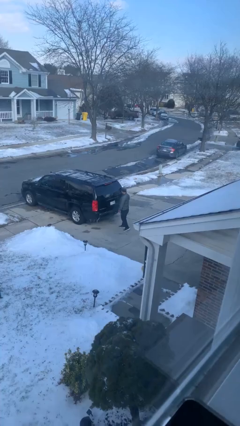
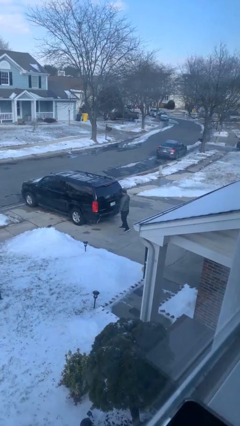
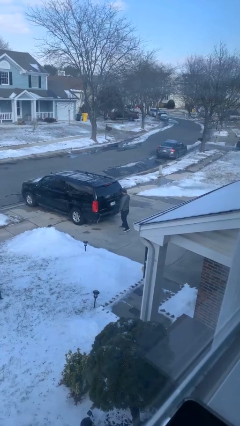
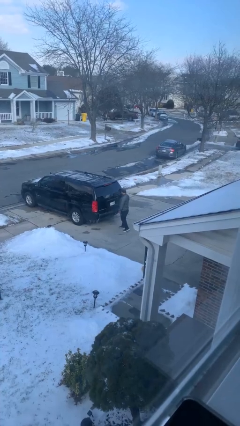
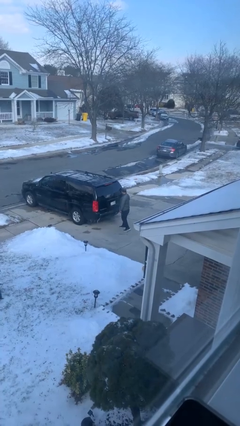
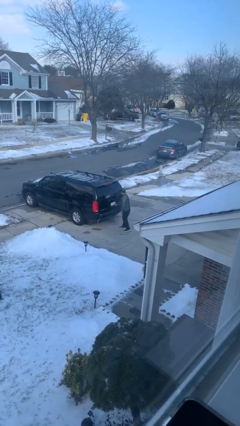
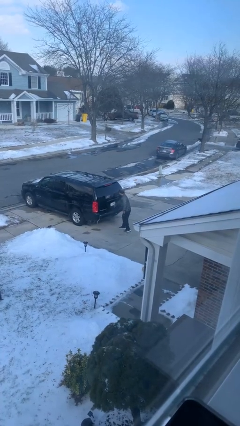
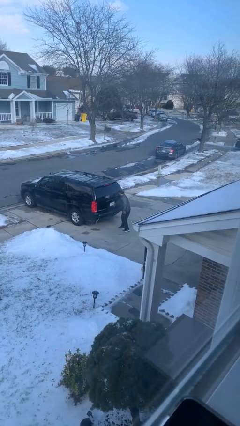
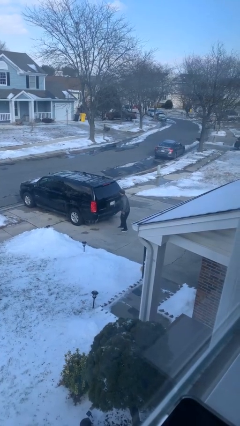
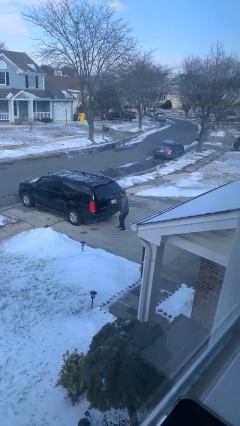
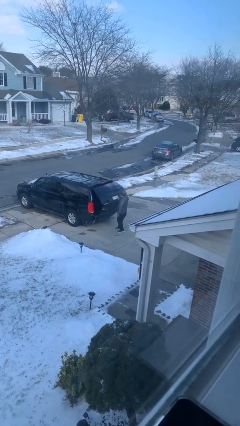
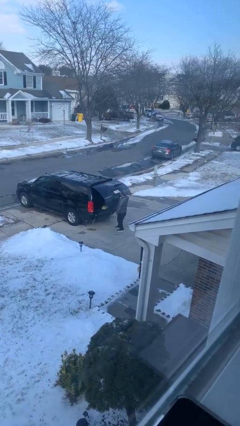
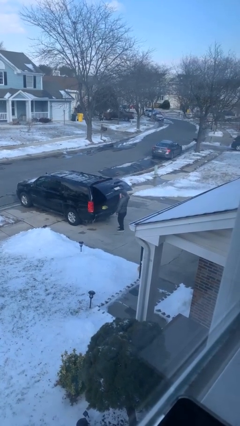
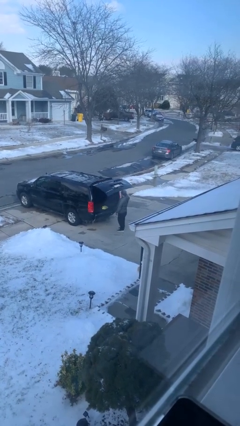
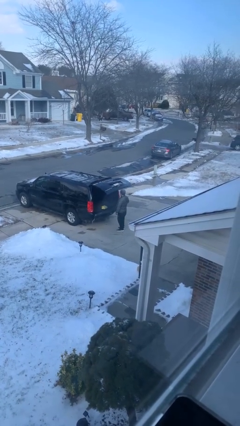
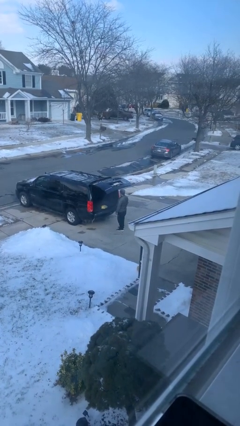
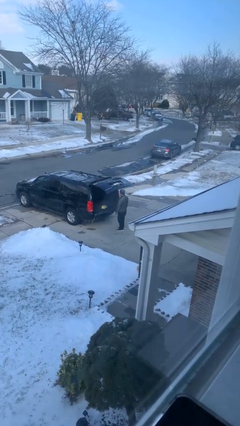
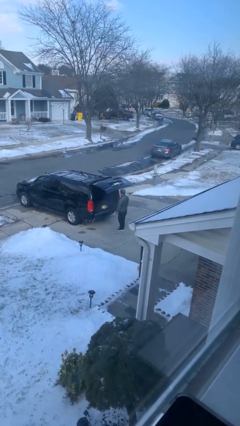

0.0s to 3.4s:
person opens car trunk

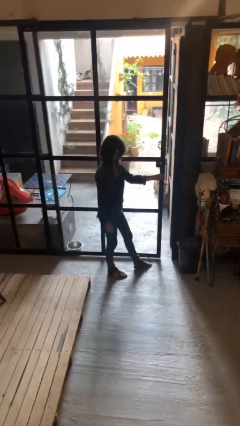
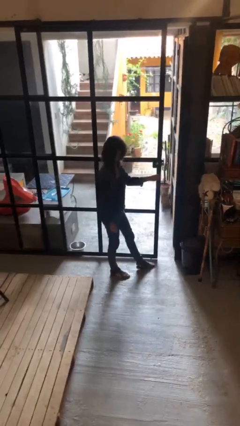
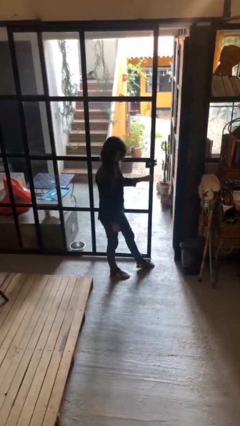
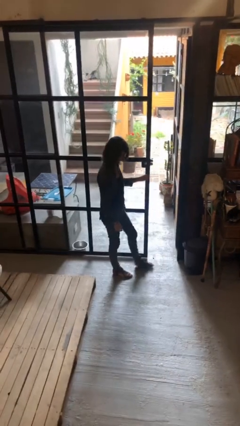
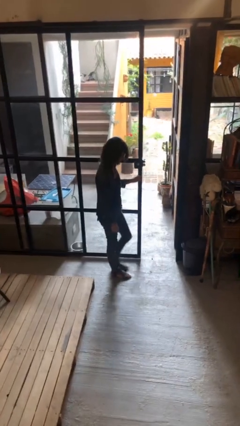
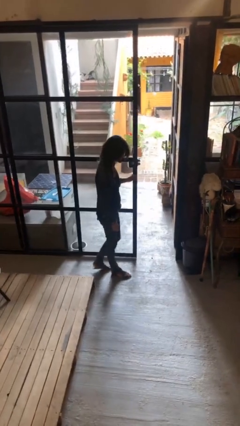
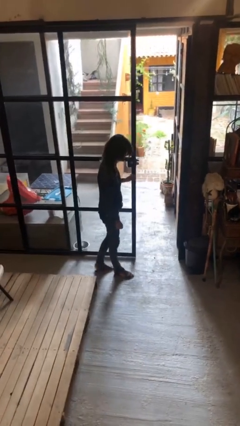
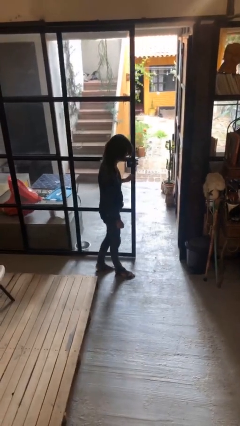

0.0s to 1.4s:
person opens sliding door

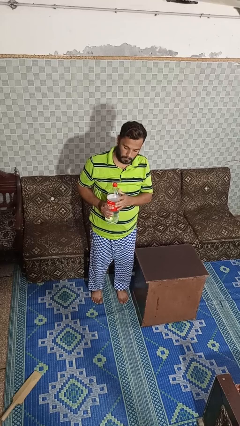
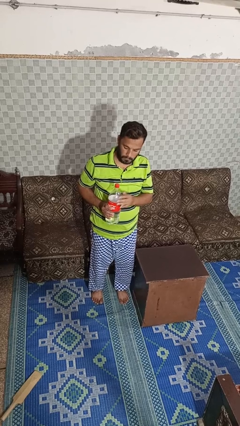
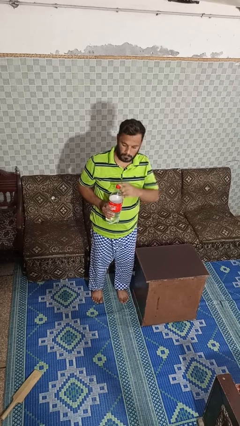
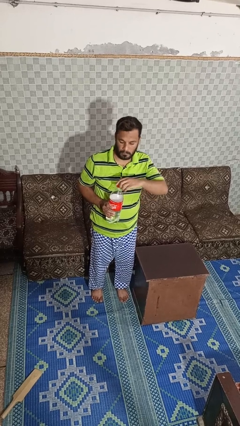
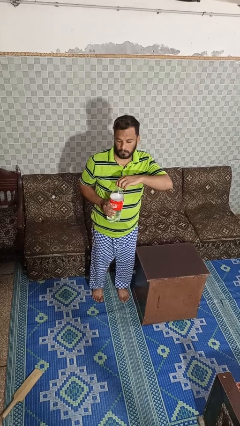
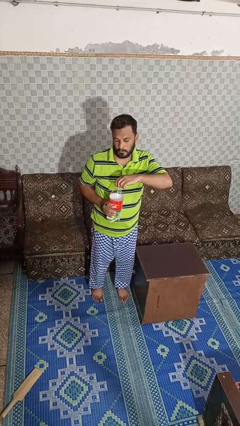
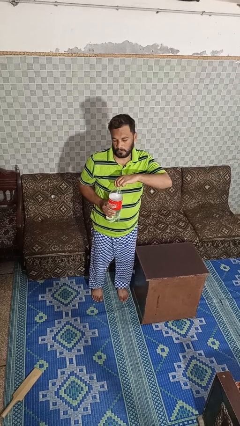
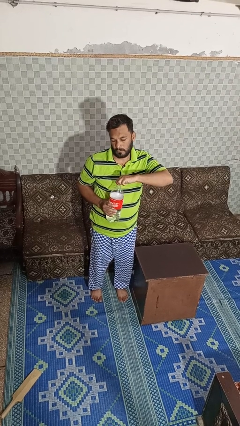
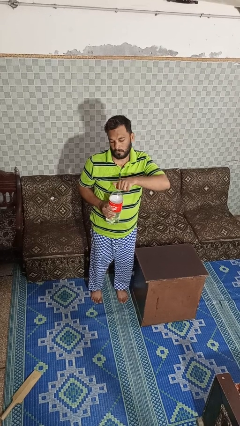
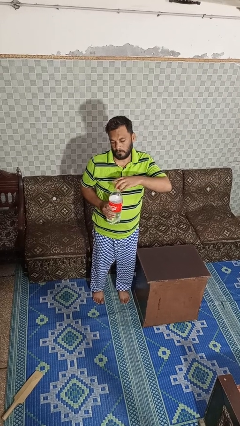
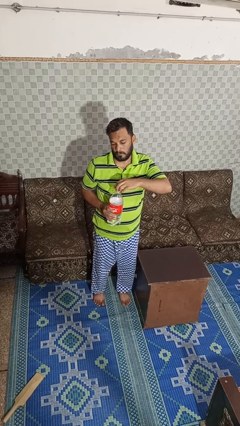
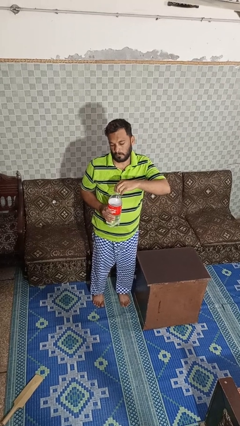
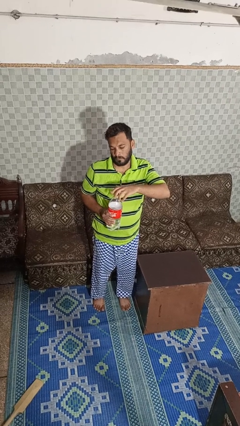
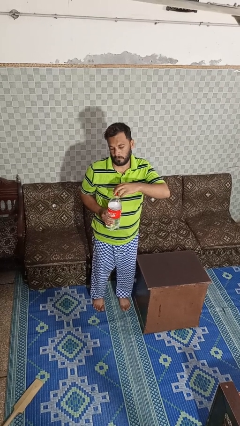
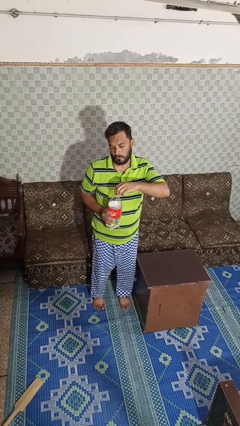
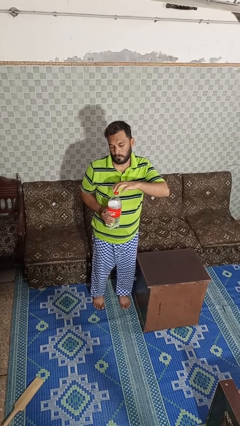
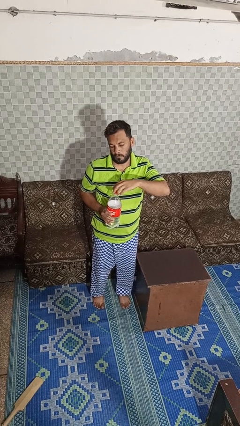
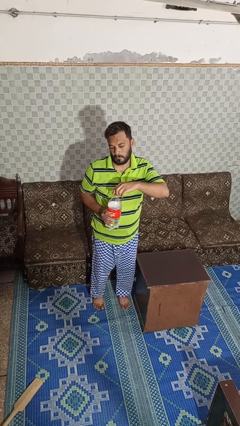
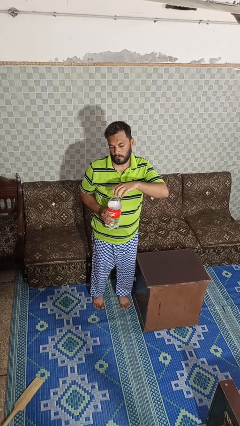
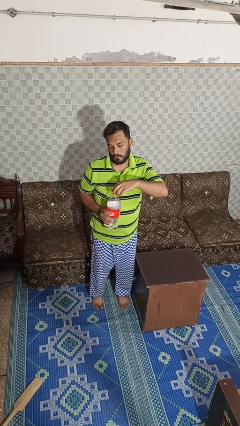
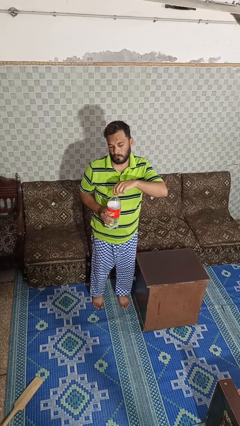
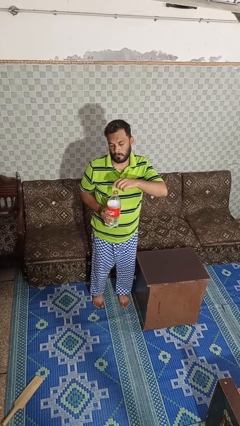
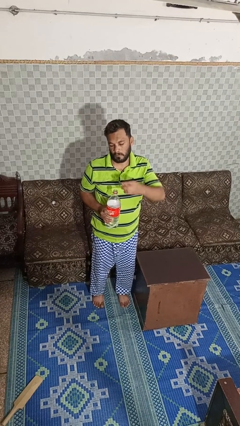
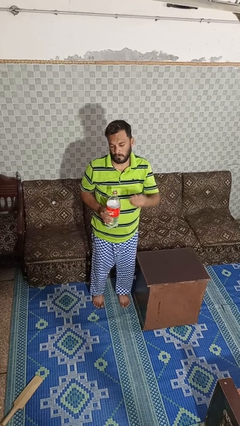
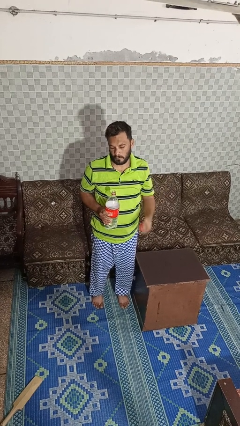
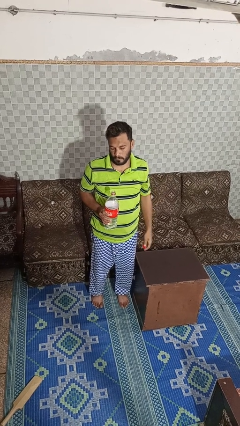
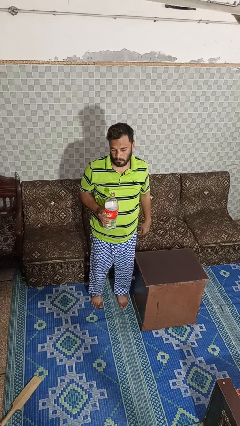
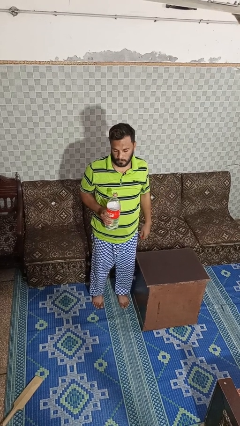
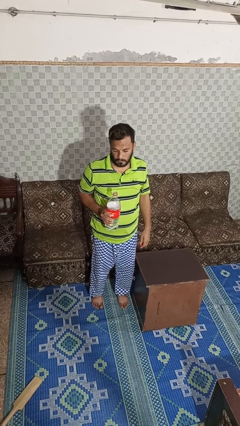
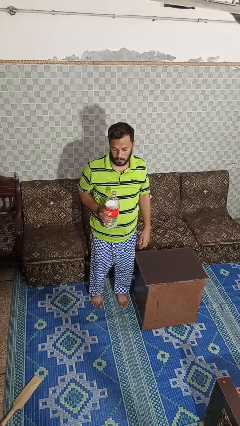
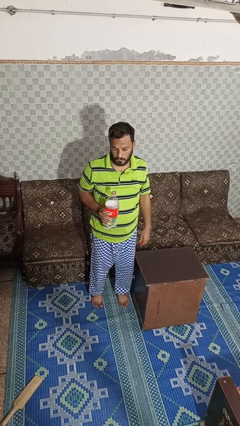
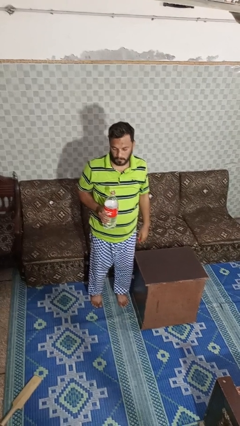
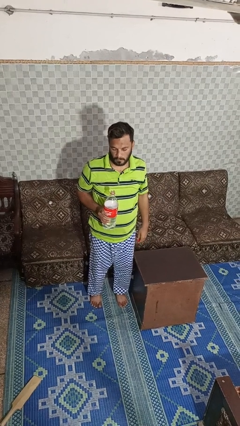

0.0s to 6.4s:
person unscrews lid from bottle

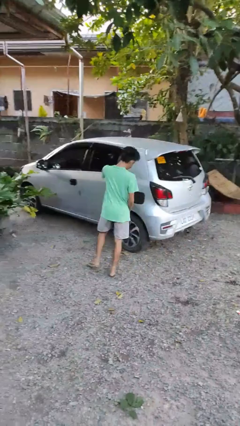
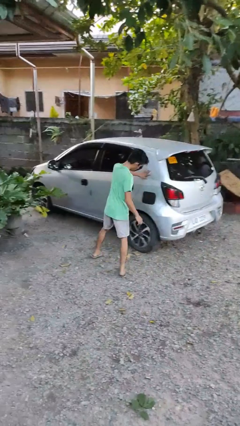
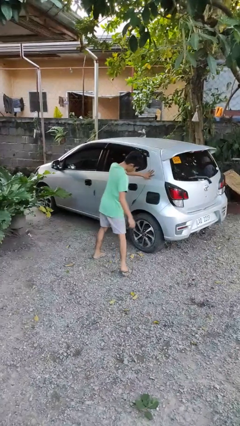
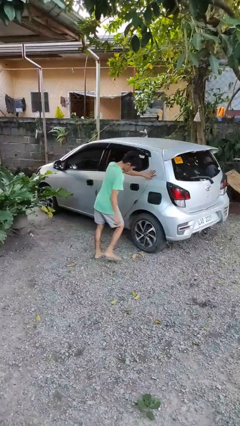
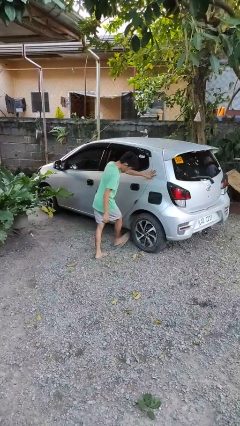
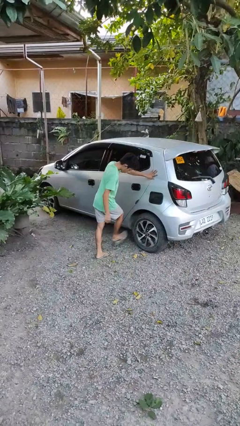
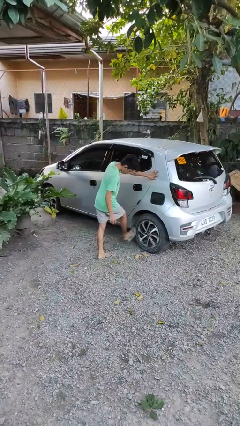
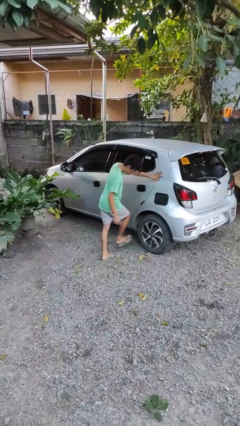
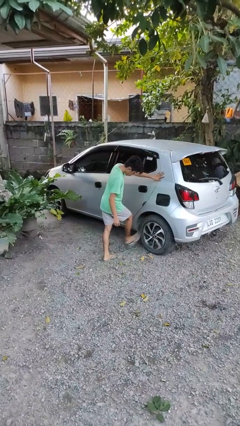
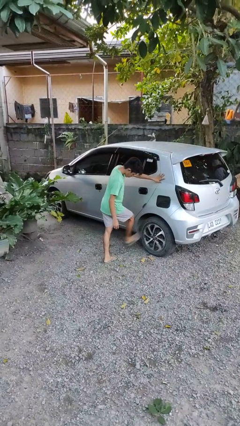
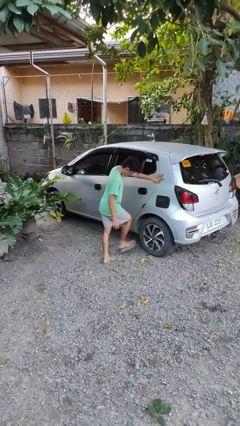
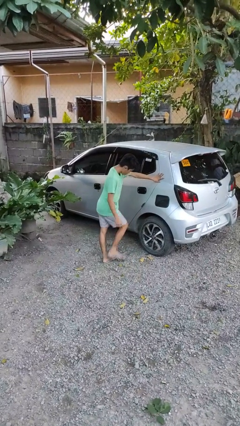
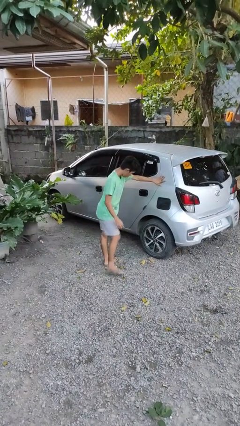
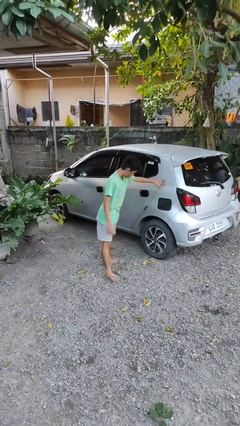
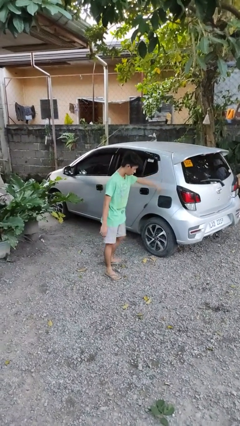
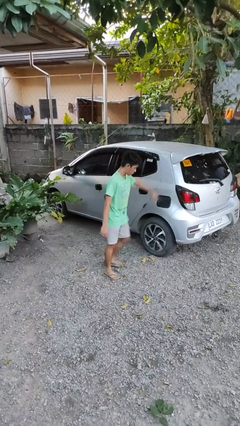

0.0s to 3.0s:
person kicks car tires

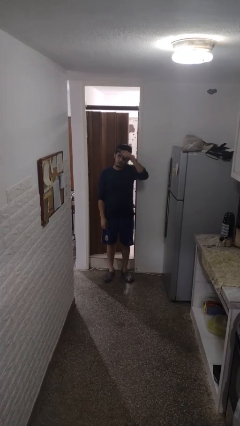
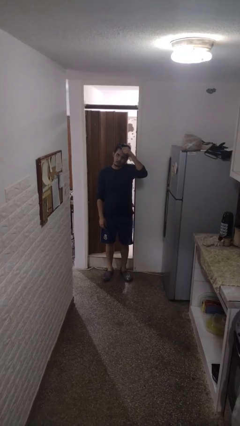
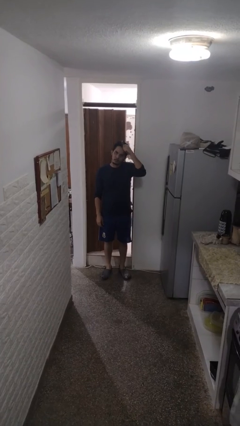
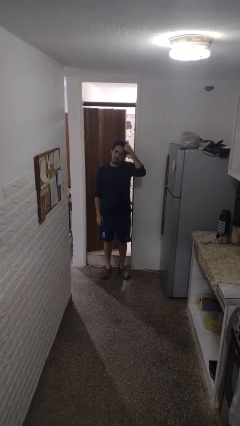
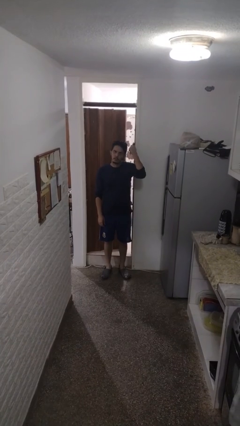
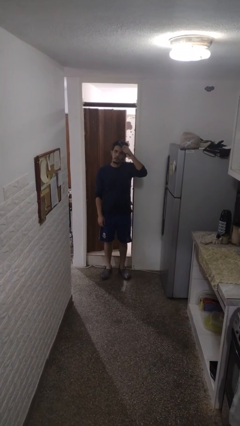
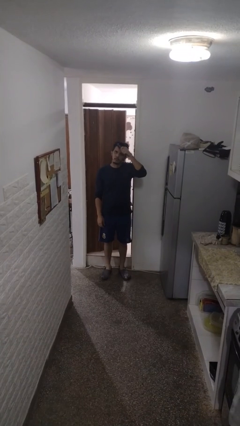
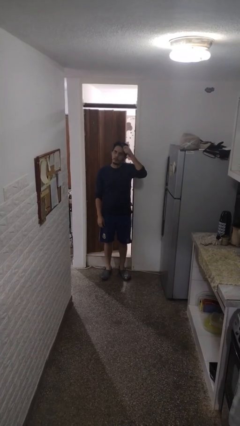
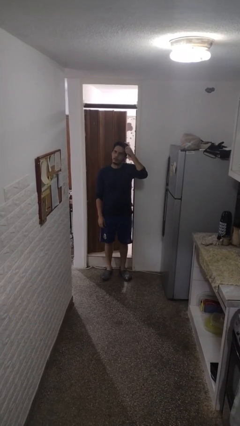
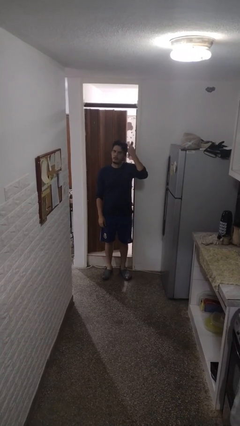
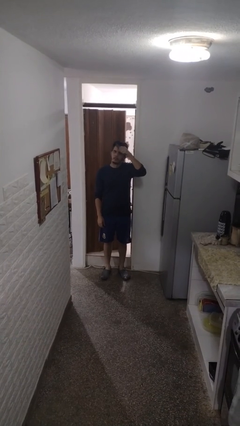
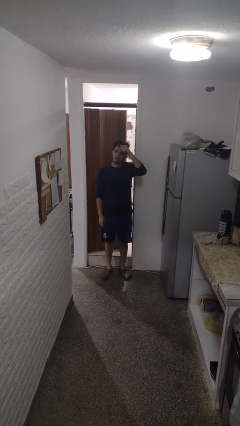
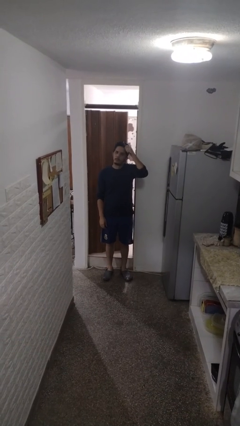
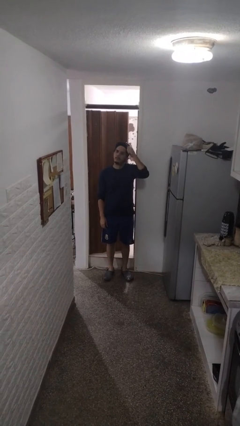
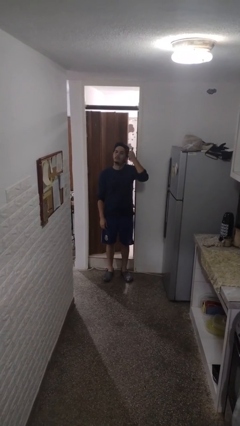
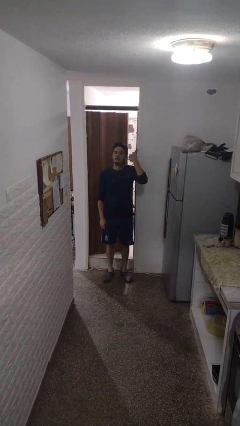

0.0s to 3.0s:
person brushes hair

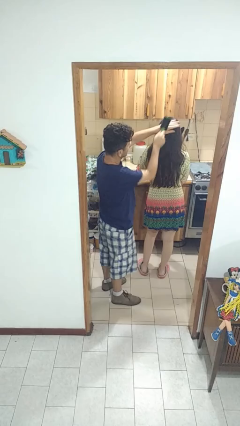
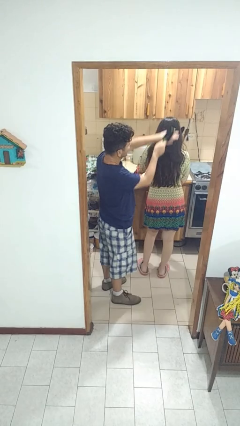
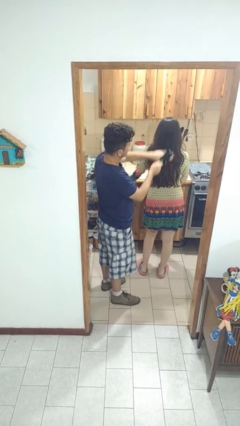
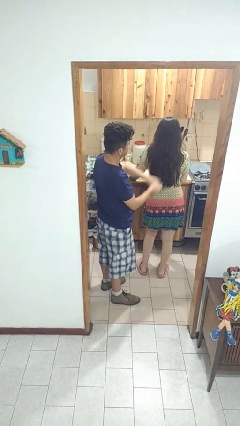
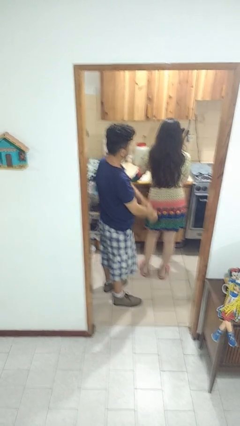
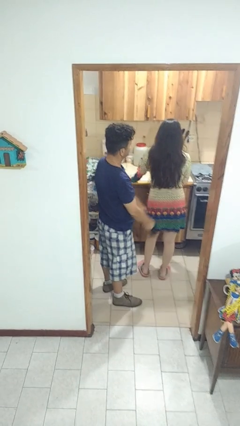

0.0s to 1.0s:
person brushes hair of person
